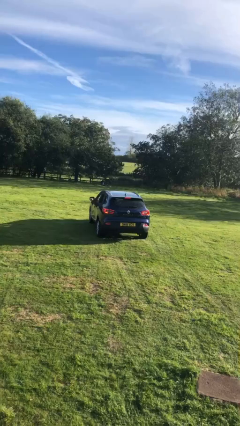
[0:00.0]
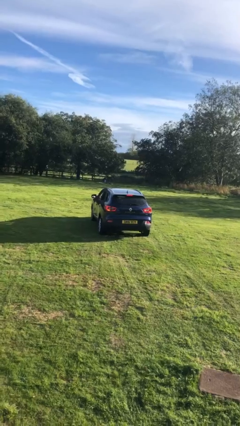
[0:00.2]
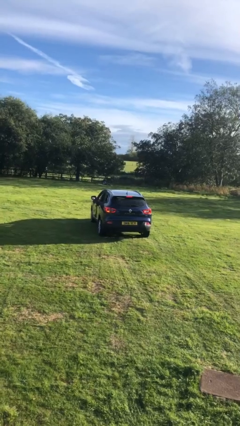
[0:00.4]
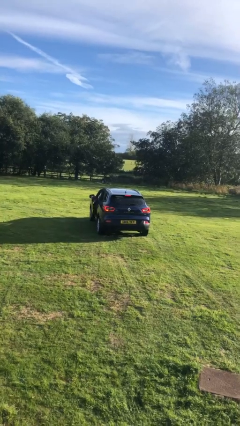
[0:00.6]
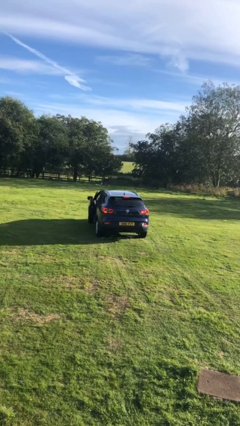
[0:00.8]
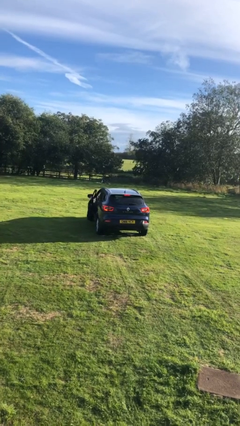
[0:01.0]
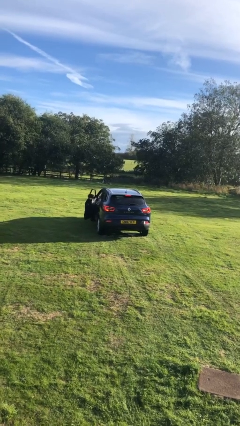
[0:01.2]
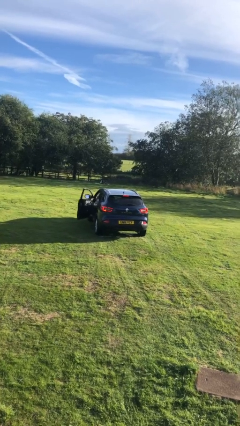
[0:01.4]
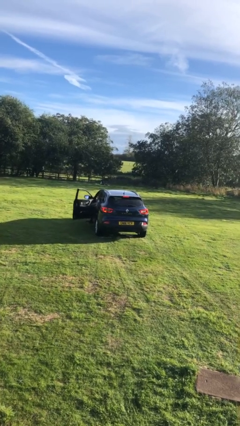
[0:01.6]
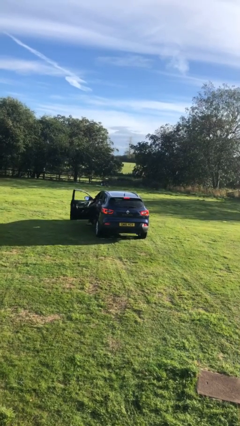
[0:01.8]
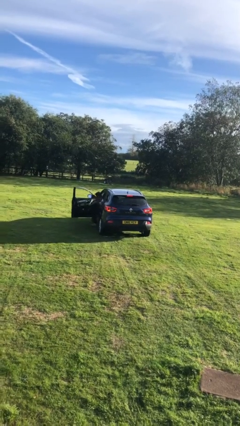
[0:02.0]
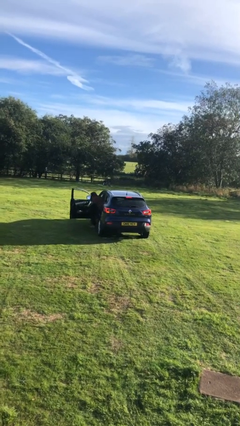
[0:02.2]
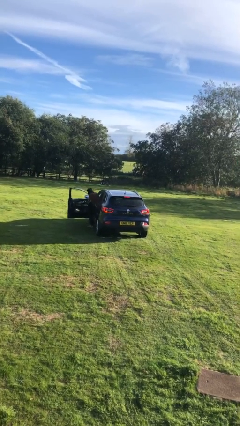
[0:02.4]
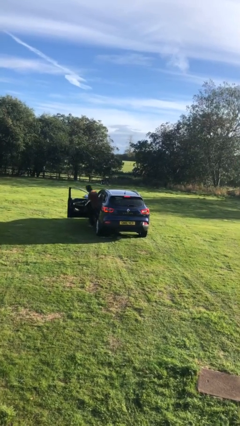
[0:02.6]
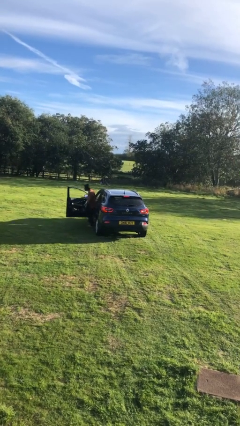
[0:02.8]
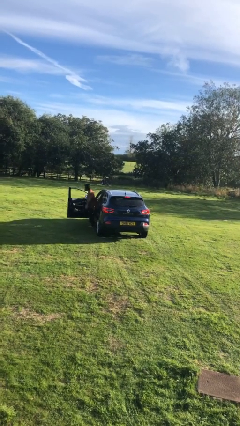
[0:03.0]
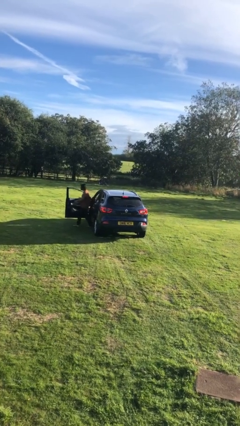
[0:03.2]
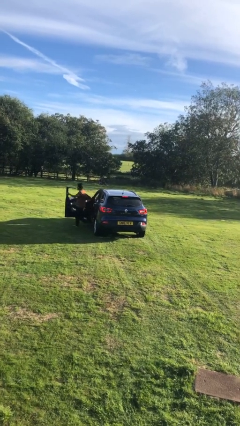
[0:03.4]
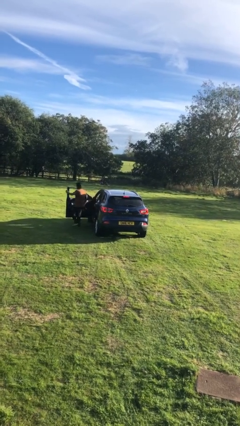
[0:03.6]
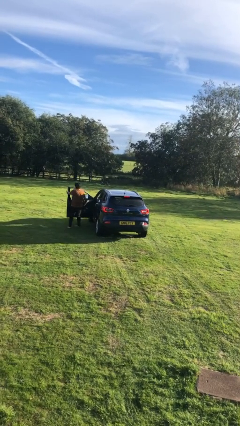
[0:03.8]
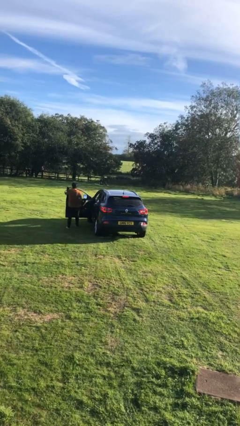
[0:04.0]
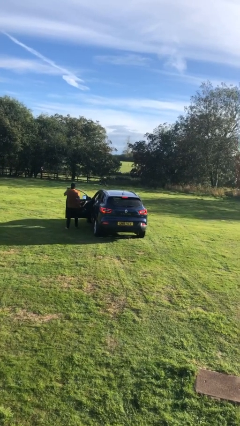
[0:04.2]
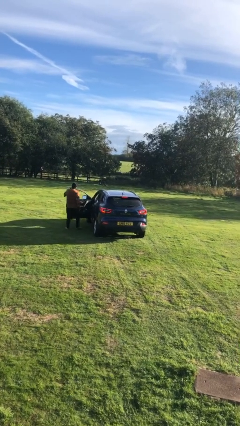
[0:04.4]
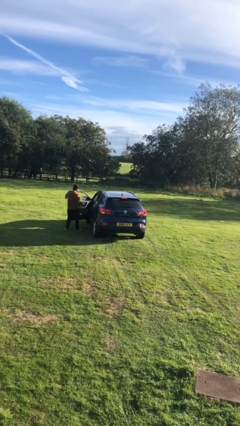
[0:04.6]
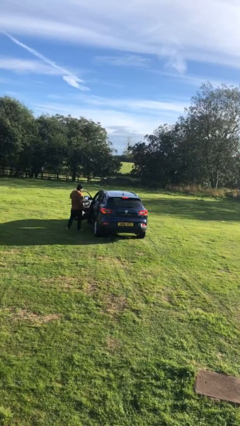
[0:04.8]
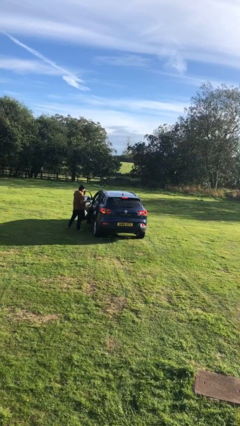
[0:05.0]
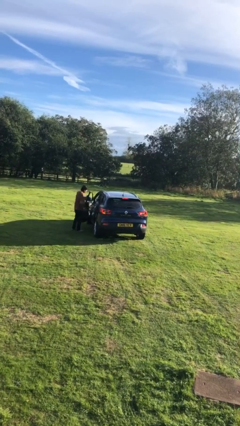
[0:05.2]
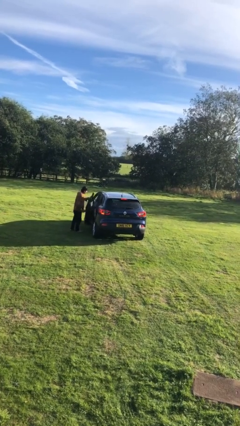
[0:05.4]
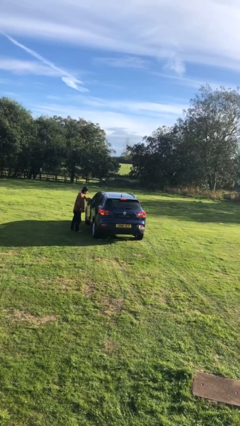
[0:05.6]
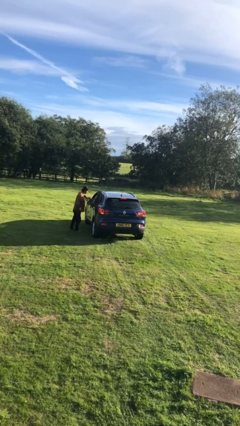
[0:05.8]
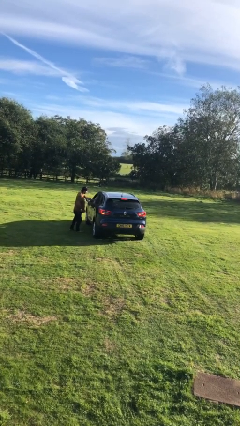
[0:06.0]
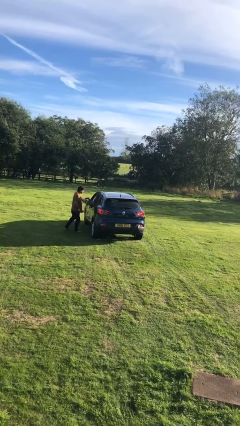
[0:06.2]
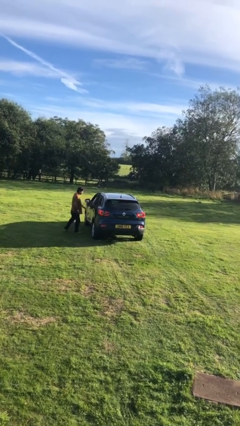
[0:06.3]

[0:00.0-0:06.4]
car drops off person

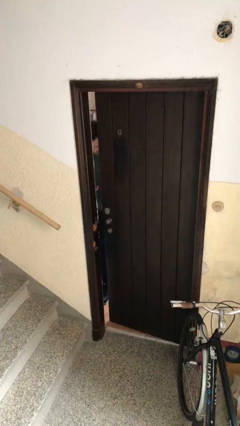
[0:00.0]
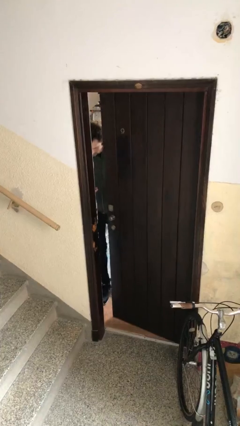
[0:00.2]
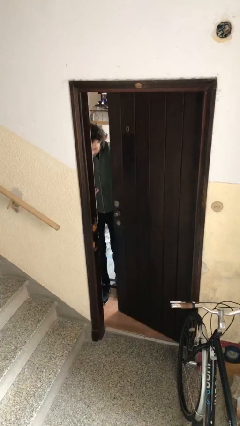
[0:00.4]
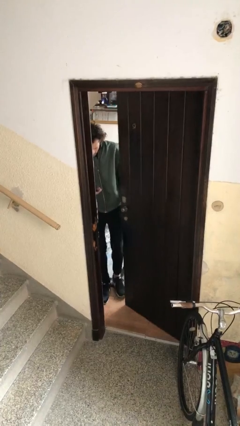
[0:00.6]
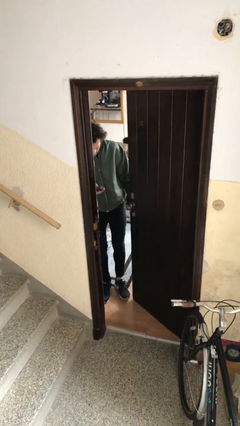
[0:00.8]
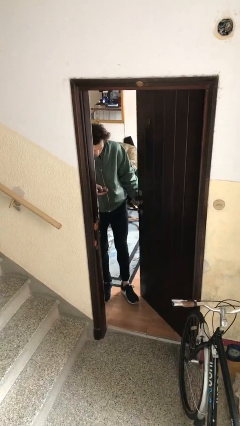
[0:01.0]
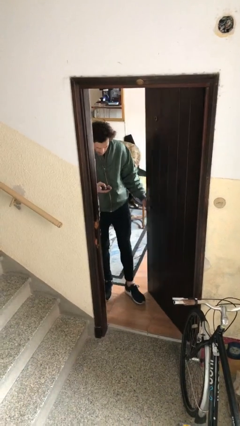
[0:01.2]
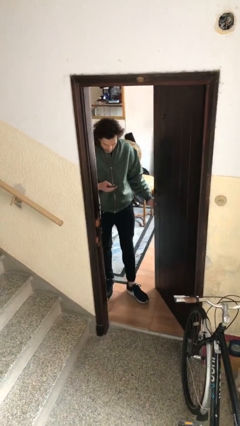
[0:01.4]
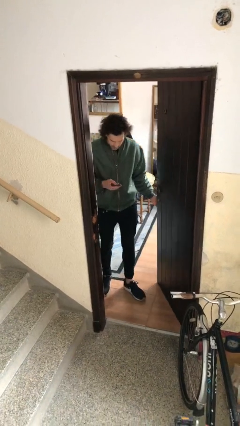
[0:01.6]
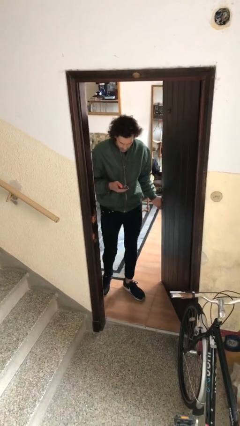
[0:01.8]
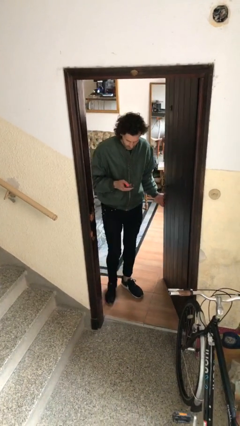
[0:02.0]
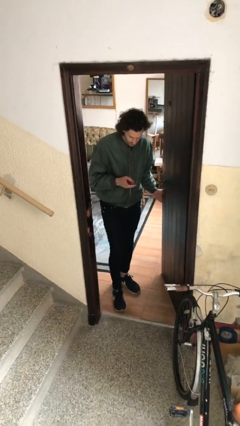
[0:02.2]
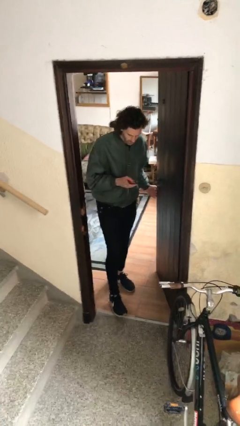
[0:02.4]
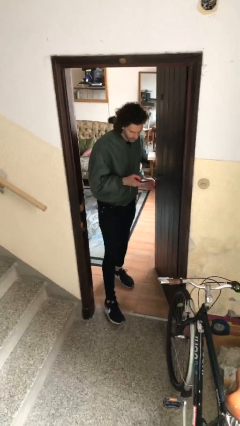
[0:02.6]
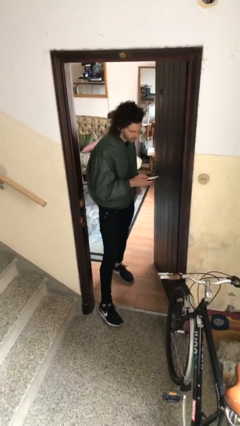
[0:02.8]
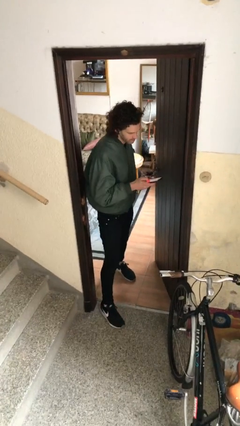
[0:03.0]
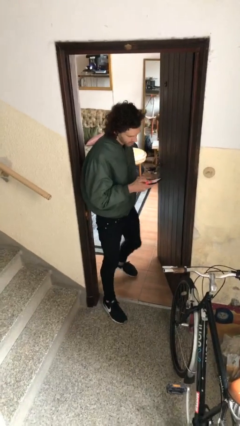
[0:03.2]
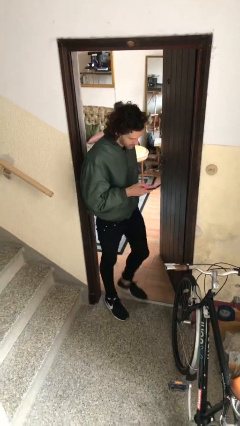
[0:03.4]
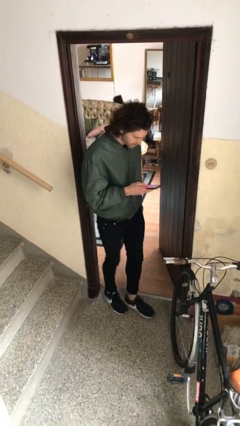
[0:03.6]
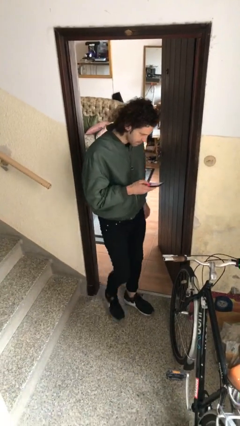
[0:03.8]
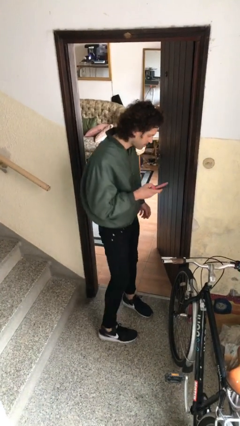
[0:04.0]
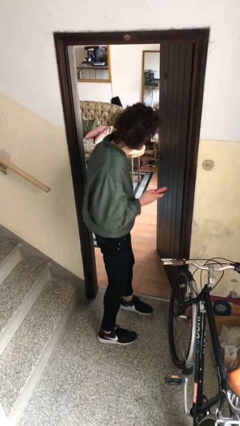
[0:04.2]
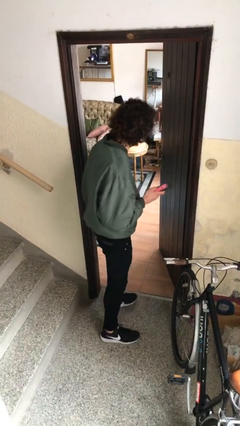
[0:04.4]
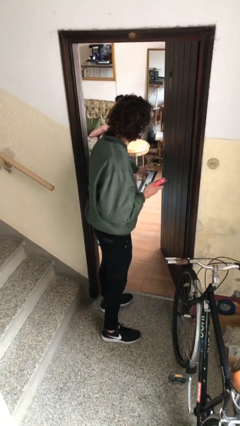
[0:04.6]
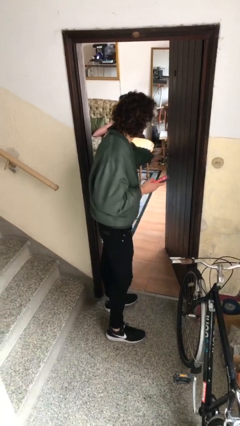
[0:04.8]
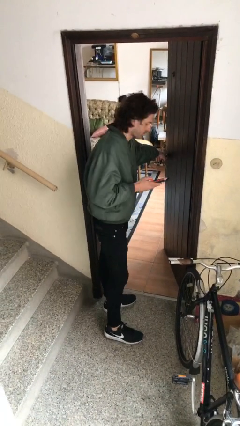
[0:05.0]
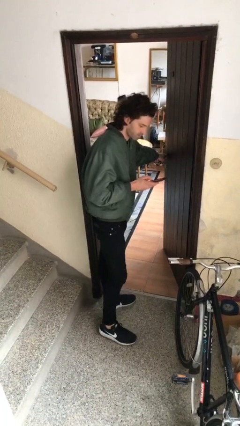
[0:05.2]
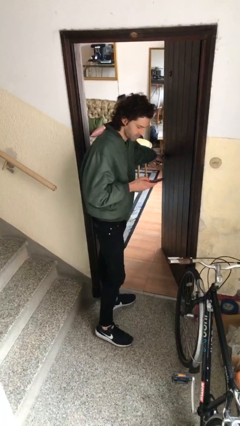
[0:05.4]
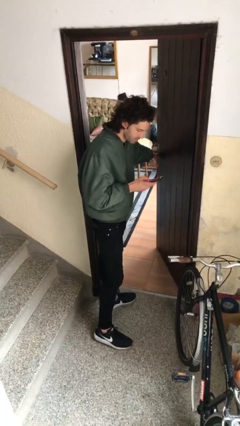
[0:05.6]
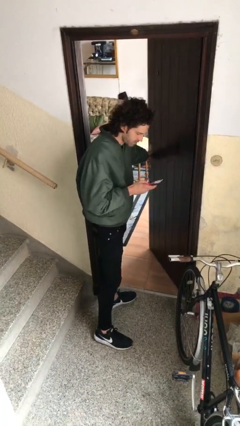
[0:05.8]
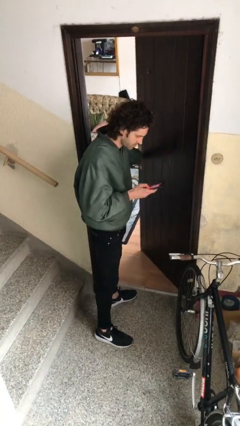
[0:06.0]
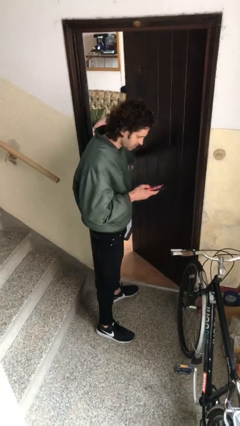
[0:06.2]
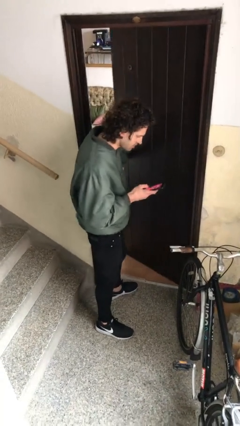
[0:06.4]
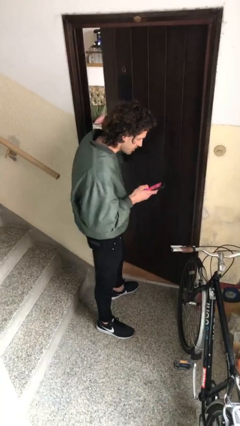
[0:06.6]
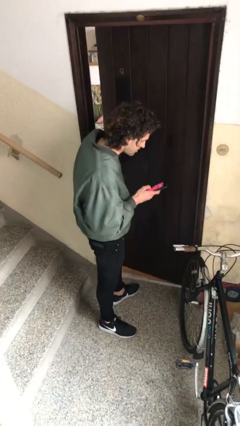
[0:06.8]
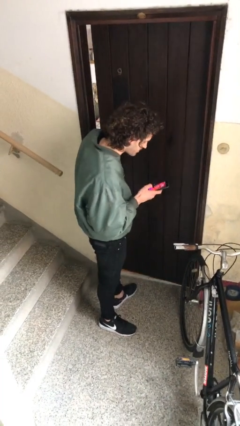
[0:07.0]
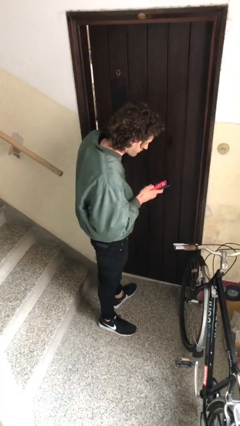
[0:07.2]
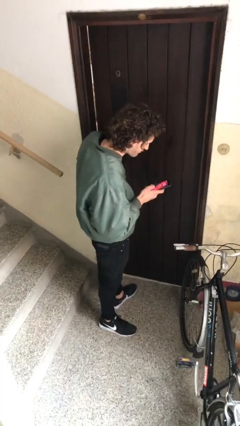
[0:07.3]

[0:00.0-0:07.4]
person texts on phone

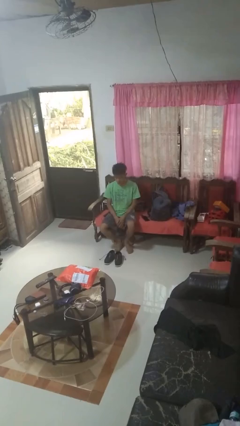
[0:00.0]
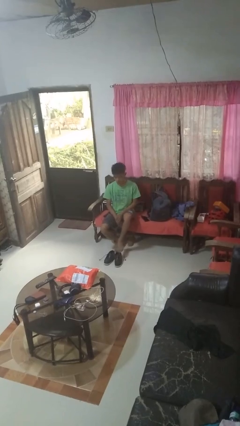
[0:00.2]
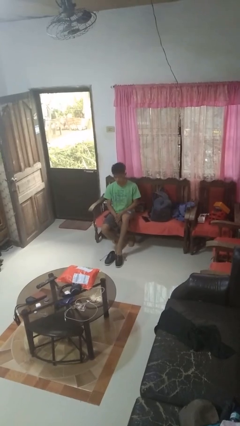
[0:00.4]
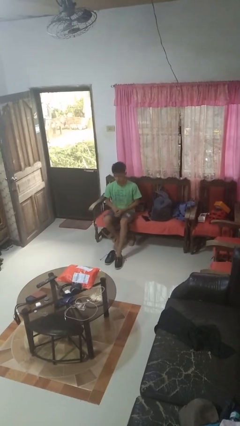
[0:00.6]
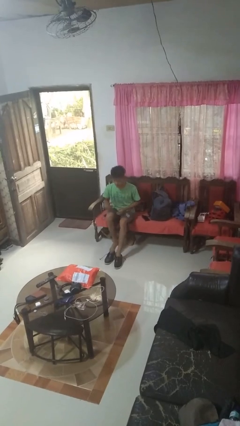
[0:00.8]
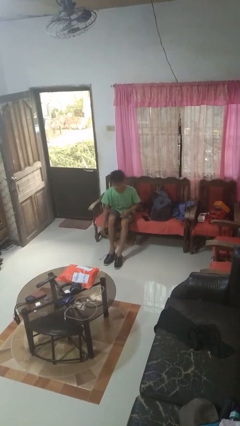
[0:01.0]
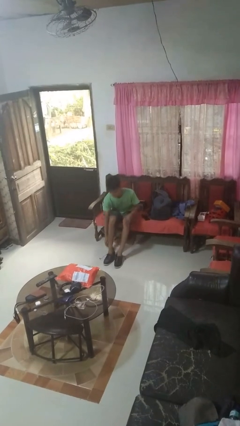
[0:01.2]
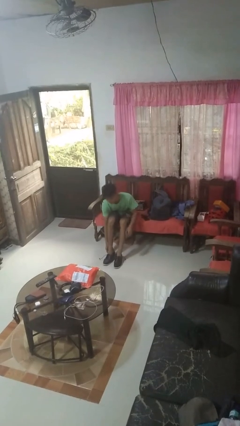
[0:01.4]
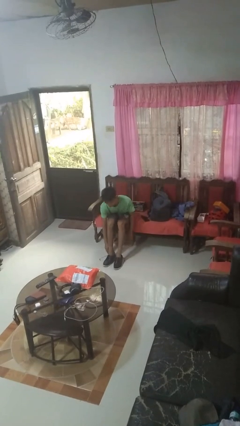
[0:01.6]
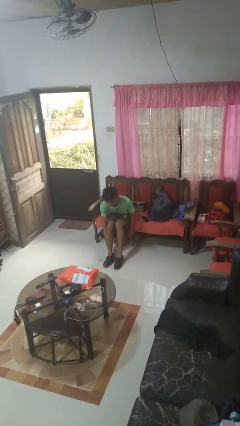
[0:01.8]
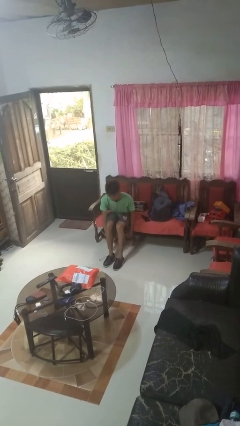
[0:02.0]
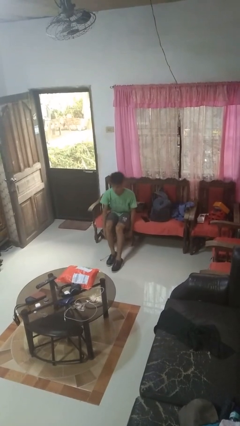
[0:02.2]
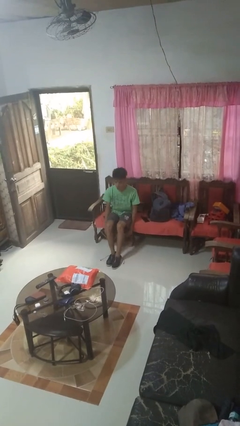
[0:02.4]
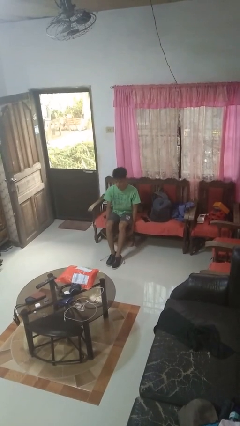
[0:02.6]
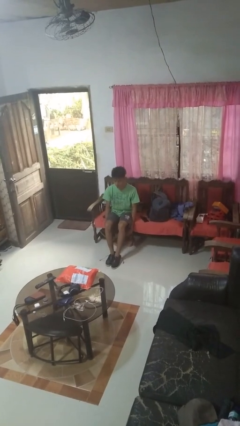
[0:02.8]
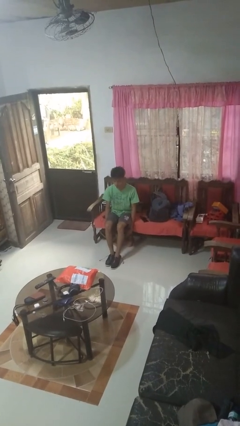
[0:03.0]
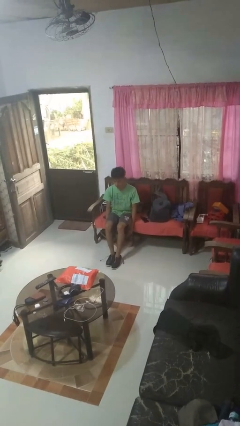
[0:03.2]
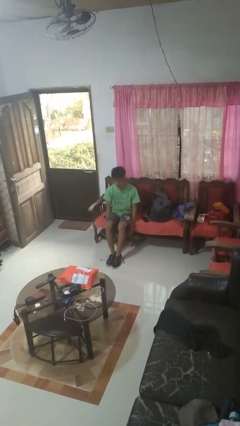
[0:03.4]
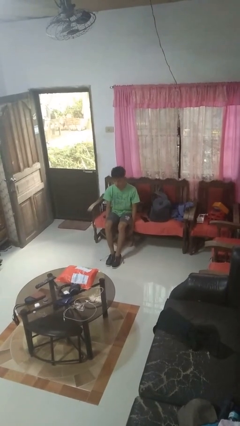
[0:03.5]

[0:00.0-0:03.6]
person puts on shoes

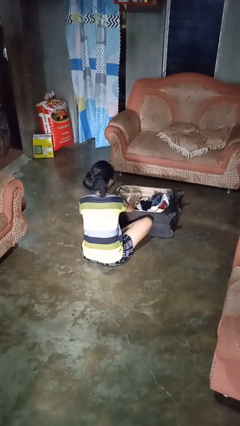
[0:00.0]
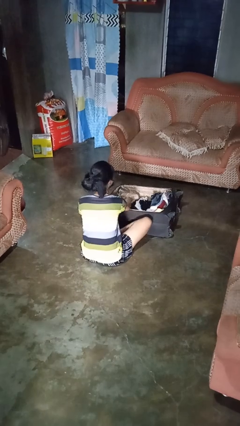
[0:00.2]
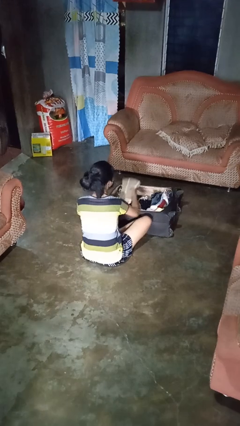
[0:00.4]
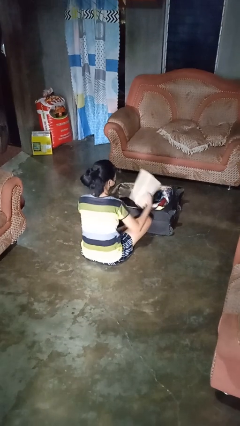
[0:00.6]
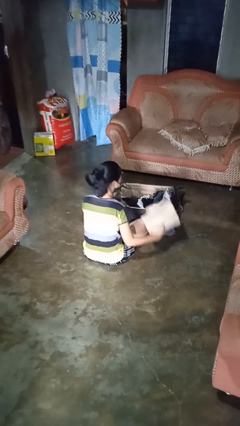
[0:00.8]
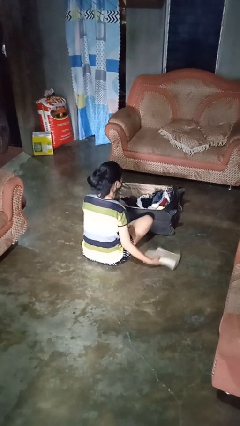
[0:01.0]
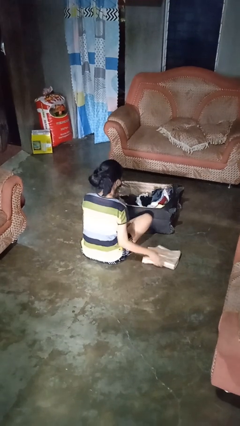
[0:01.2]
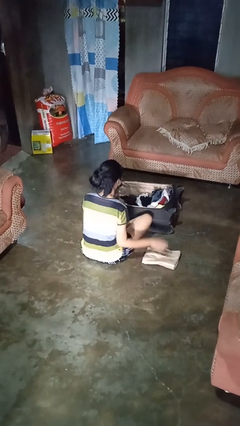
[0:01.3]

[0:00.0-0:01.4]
person unloads clothes from suitcase
